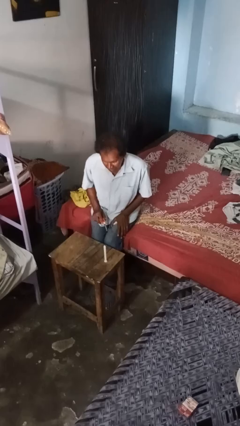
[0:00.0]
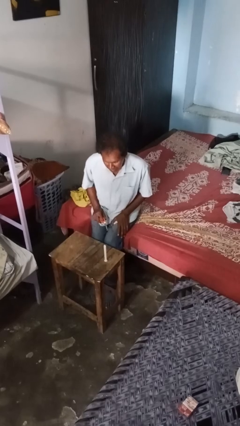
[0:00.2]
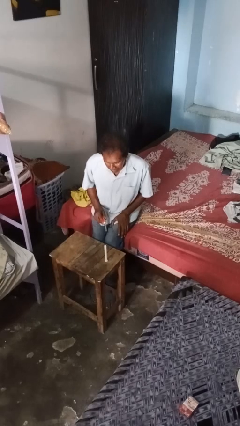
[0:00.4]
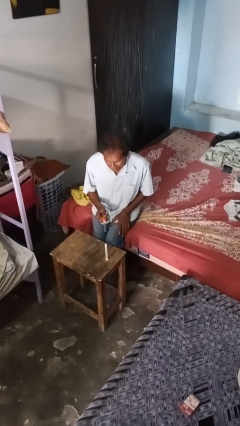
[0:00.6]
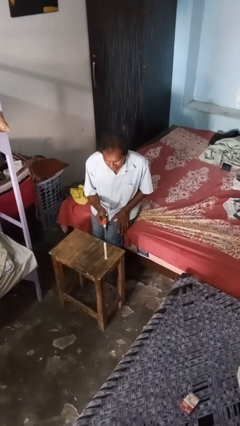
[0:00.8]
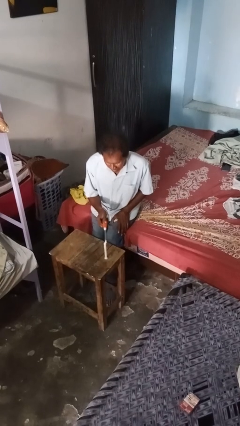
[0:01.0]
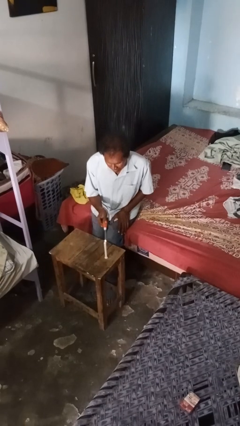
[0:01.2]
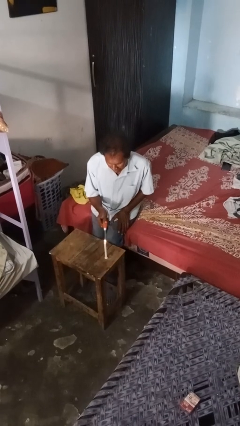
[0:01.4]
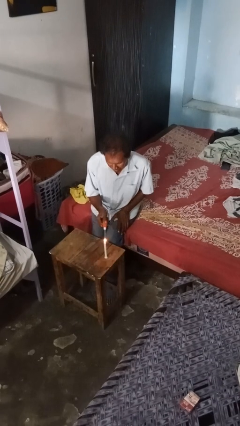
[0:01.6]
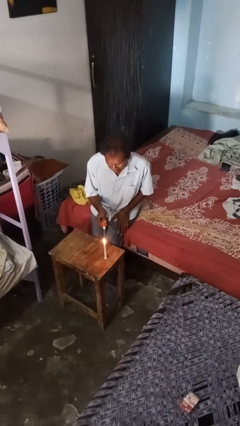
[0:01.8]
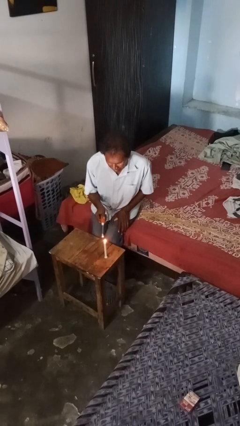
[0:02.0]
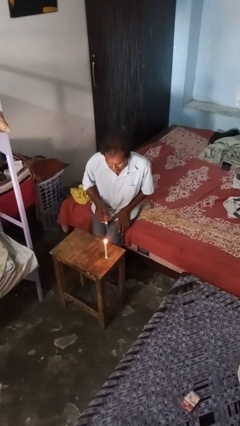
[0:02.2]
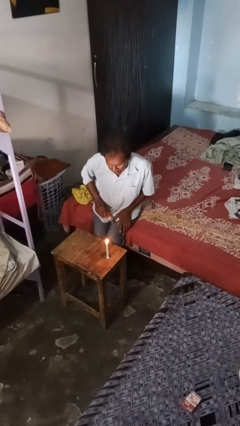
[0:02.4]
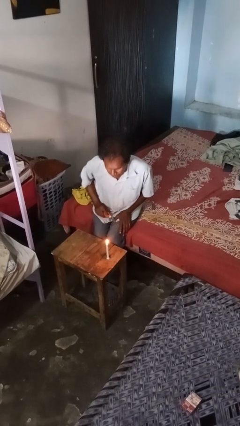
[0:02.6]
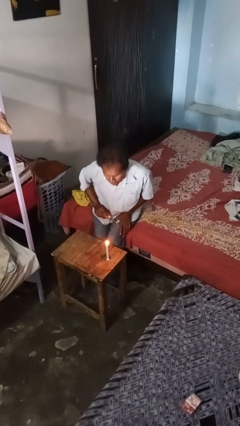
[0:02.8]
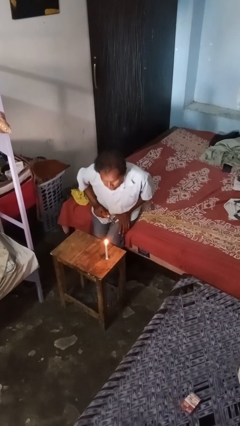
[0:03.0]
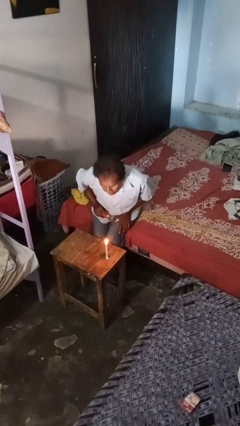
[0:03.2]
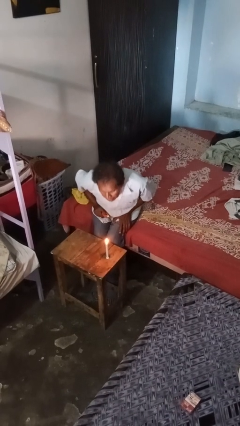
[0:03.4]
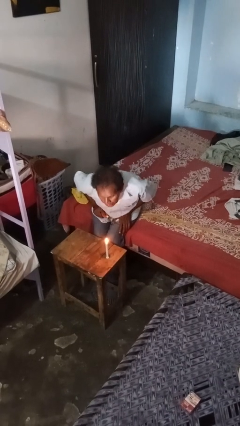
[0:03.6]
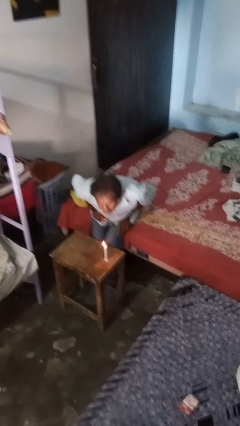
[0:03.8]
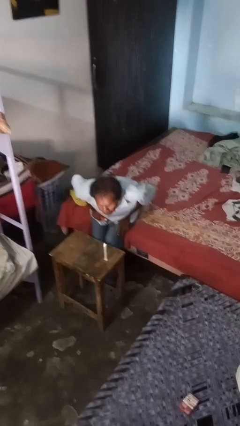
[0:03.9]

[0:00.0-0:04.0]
person lights candle

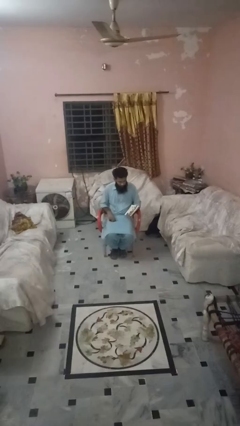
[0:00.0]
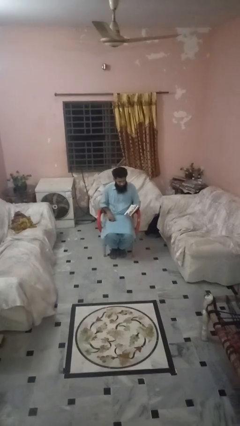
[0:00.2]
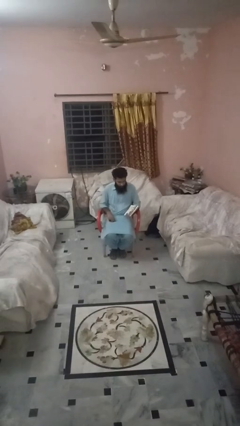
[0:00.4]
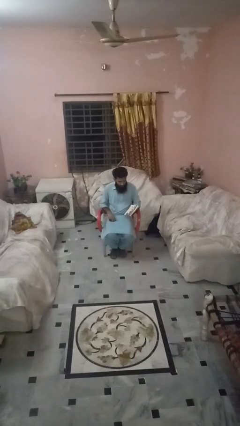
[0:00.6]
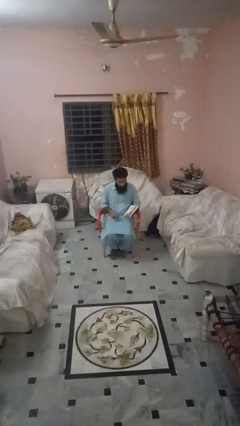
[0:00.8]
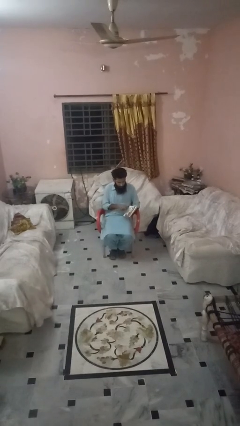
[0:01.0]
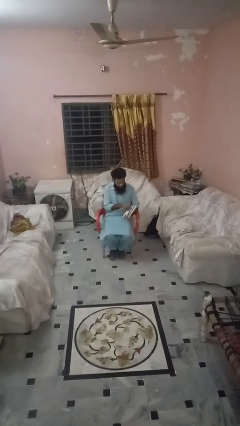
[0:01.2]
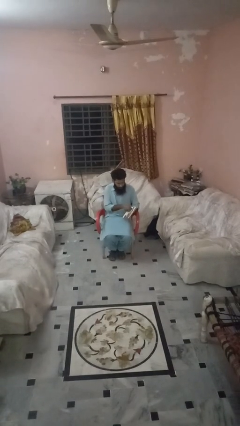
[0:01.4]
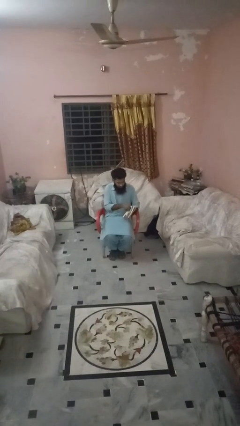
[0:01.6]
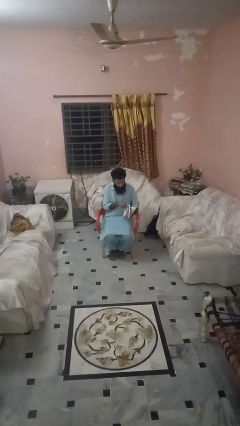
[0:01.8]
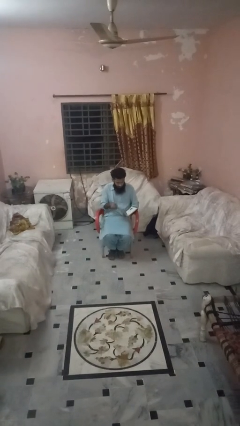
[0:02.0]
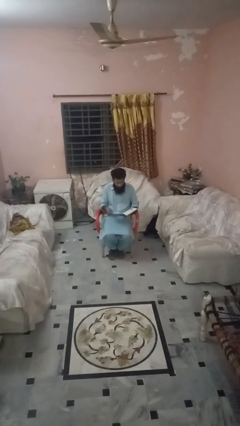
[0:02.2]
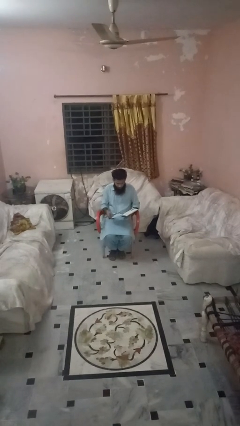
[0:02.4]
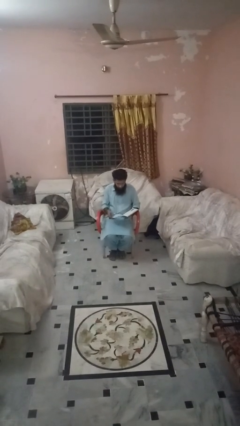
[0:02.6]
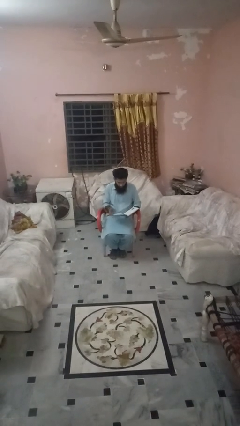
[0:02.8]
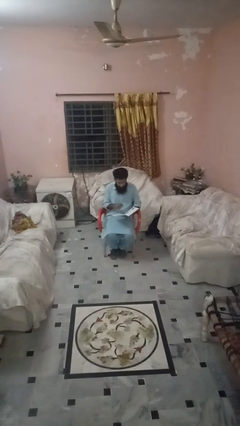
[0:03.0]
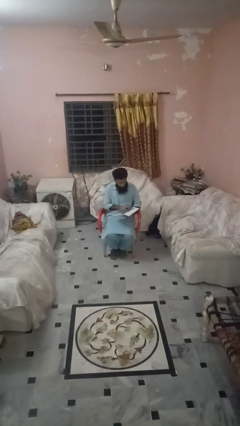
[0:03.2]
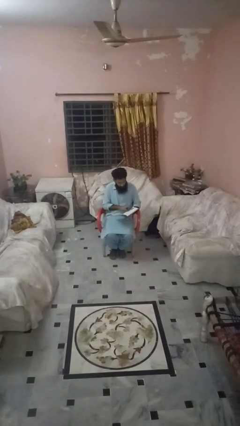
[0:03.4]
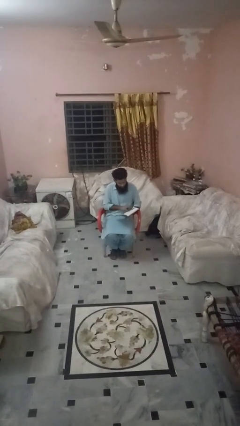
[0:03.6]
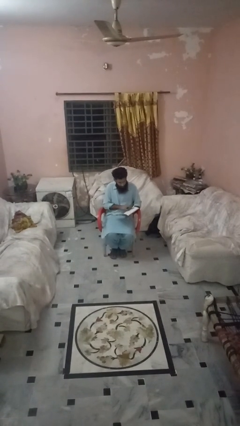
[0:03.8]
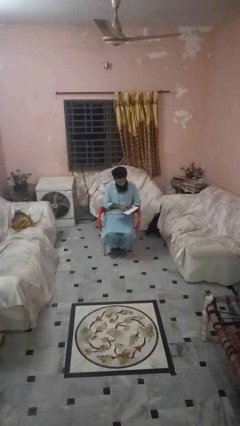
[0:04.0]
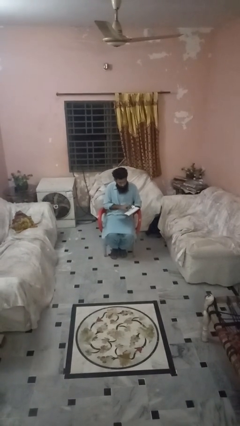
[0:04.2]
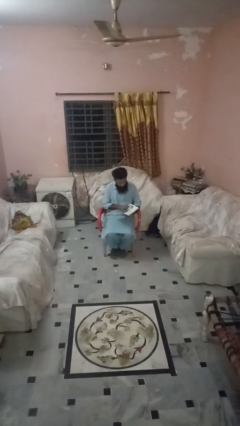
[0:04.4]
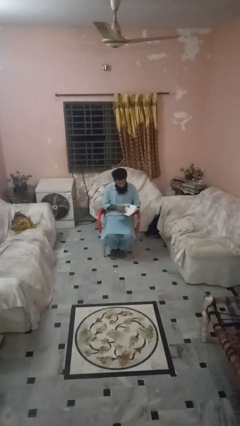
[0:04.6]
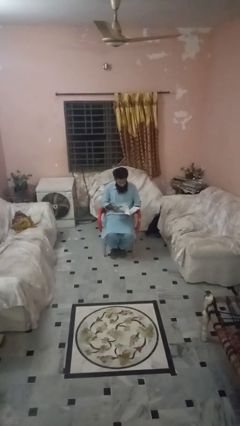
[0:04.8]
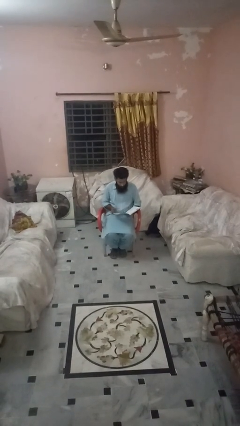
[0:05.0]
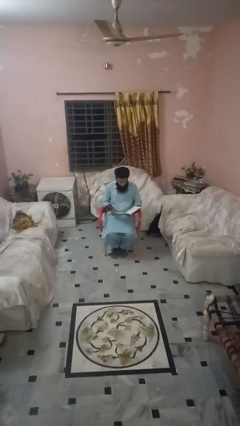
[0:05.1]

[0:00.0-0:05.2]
person reads magazine

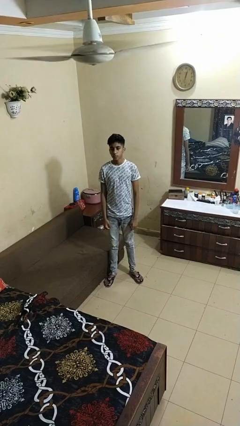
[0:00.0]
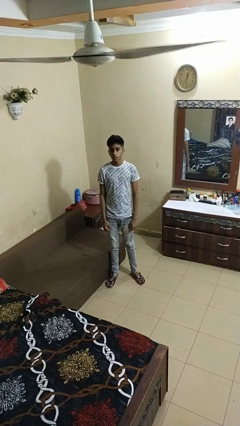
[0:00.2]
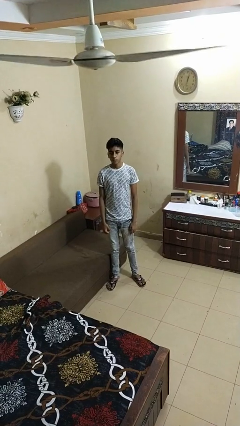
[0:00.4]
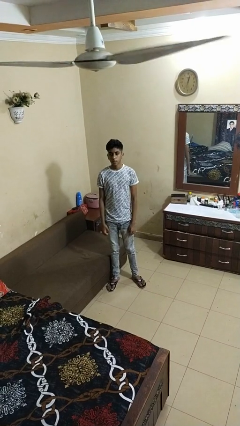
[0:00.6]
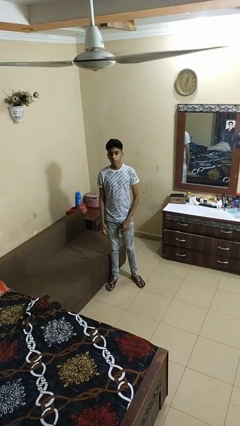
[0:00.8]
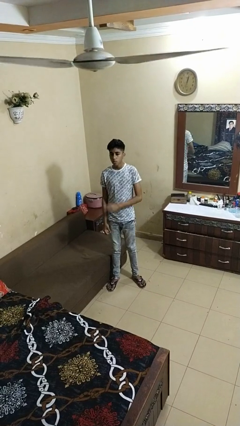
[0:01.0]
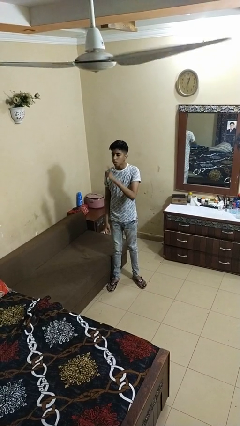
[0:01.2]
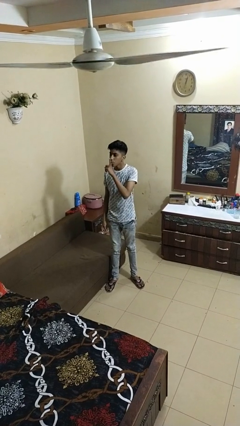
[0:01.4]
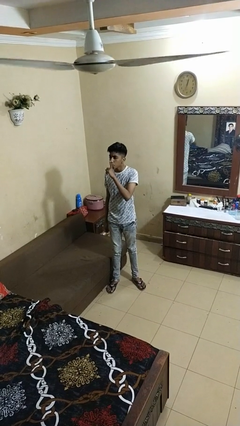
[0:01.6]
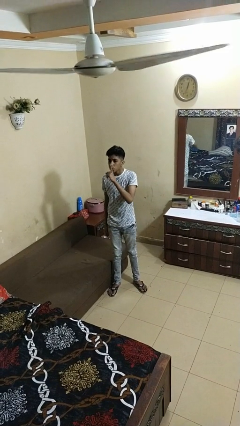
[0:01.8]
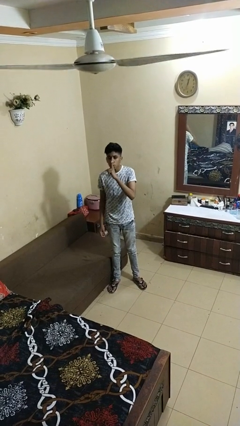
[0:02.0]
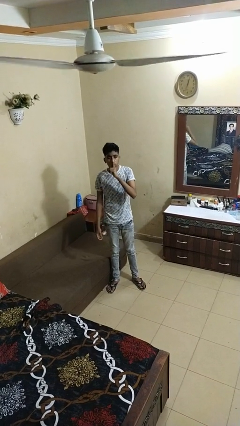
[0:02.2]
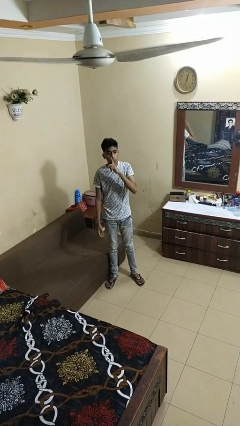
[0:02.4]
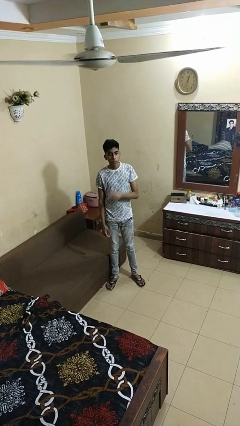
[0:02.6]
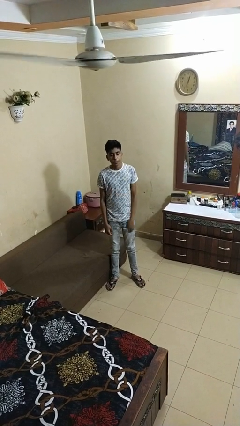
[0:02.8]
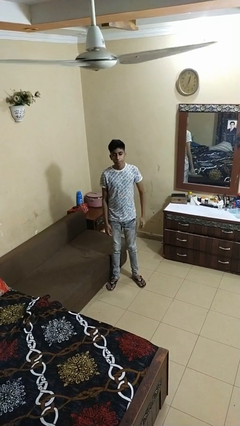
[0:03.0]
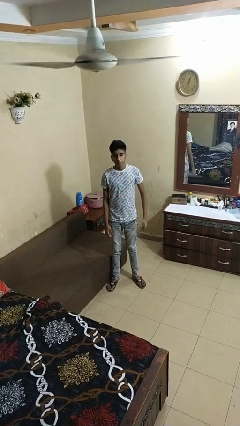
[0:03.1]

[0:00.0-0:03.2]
person gestures be quiet

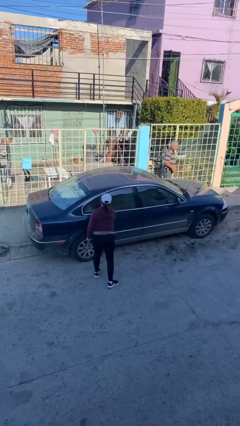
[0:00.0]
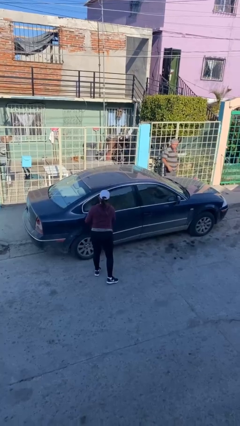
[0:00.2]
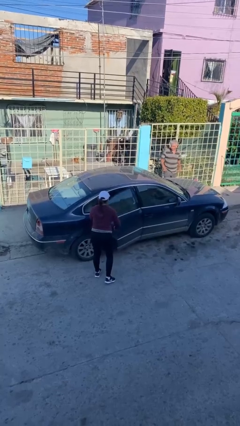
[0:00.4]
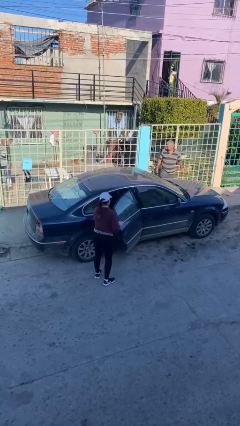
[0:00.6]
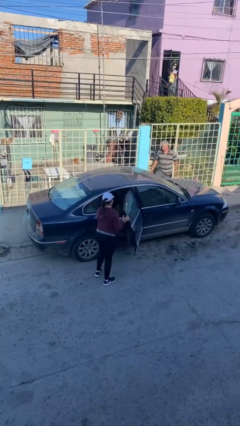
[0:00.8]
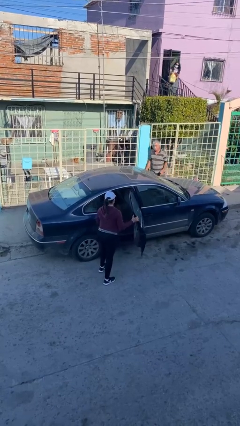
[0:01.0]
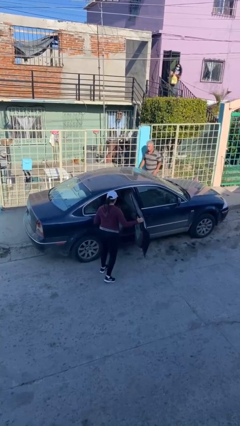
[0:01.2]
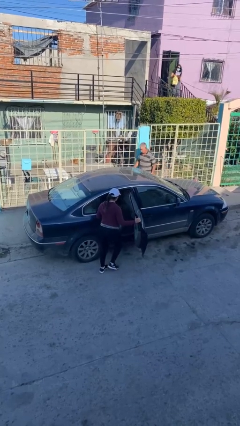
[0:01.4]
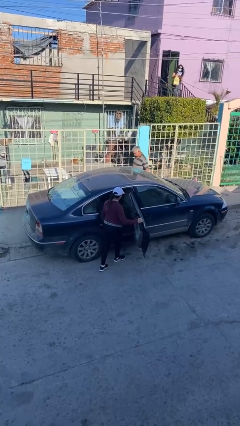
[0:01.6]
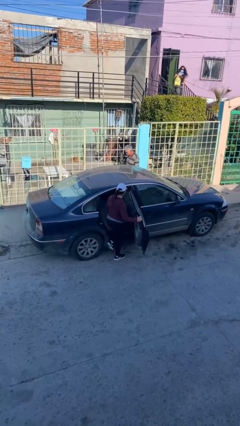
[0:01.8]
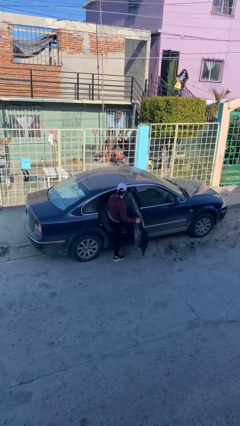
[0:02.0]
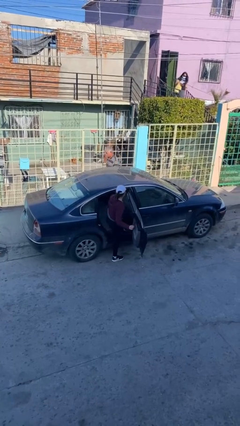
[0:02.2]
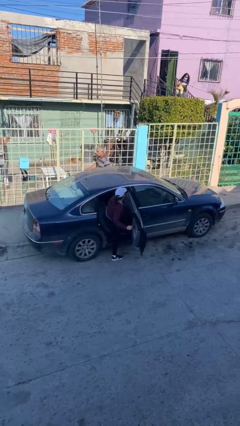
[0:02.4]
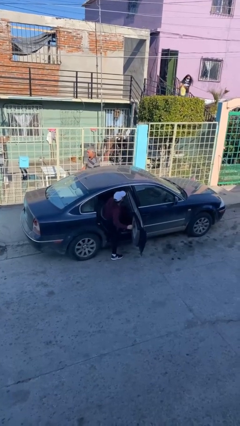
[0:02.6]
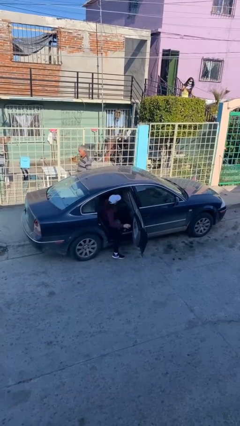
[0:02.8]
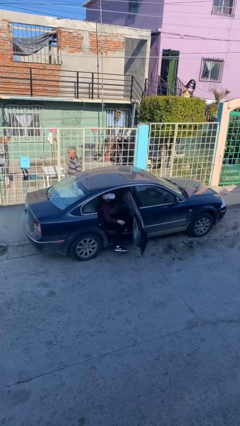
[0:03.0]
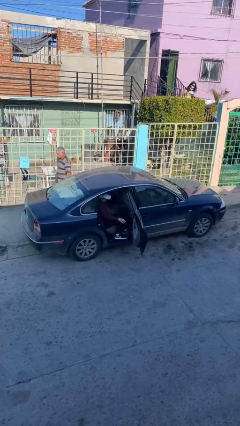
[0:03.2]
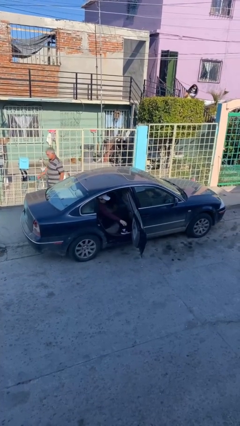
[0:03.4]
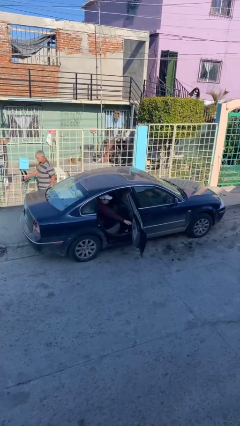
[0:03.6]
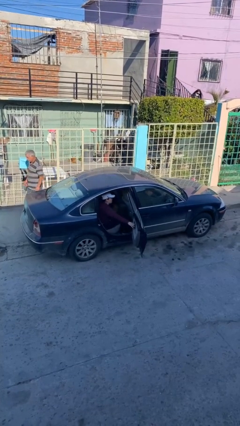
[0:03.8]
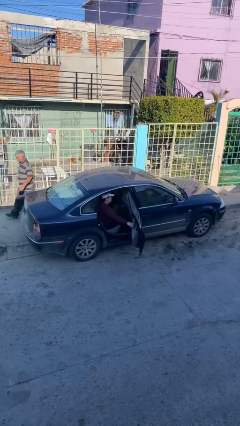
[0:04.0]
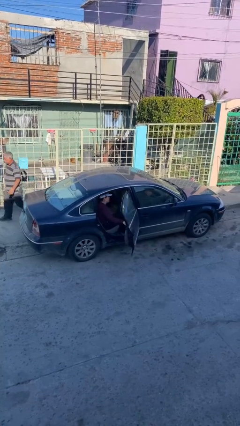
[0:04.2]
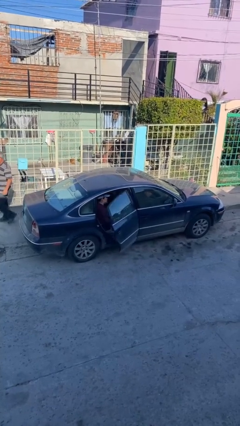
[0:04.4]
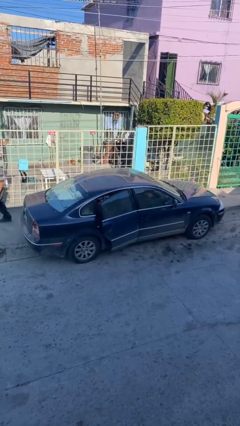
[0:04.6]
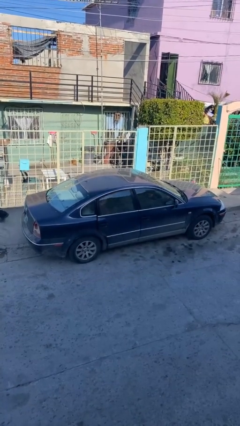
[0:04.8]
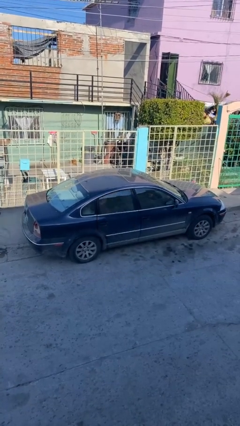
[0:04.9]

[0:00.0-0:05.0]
car picks up person

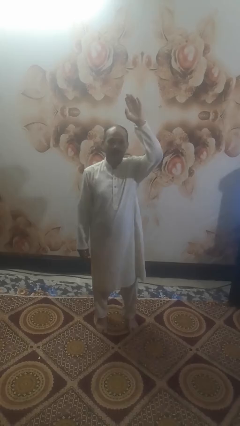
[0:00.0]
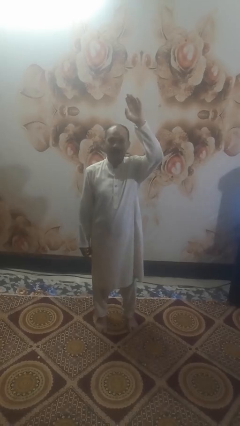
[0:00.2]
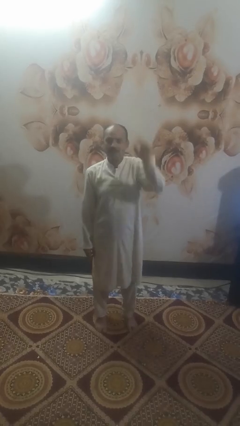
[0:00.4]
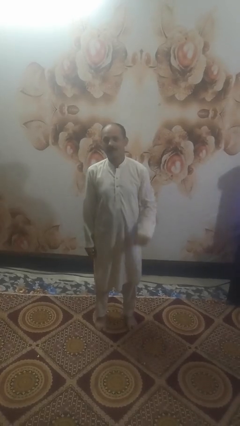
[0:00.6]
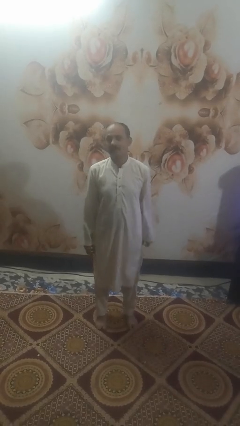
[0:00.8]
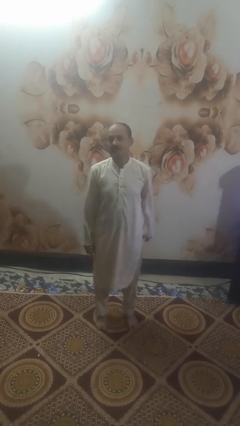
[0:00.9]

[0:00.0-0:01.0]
person gestures lower hand
